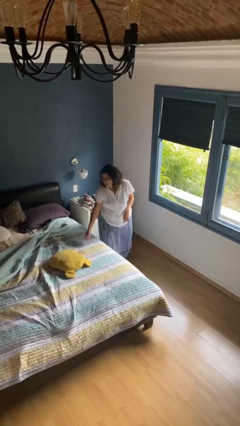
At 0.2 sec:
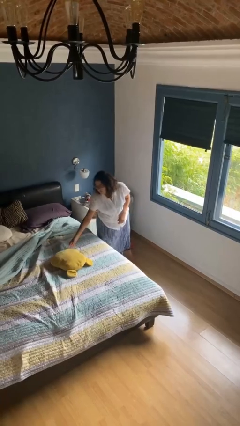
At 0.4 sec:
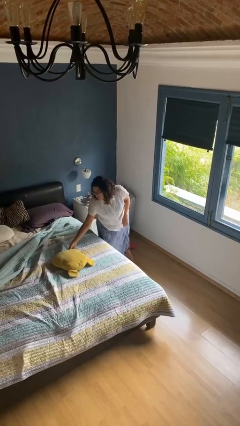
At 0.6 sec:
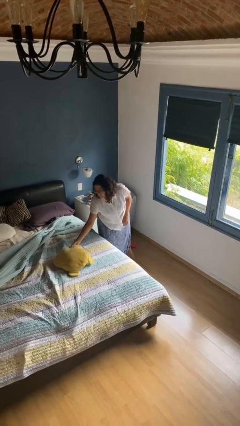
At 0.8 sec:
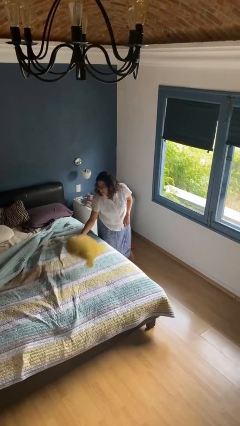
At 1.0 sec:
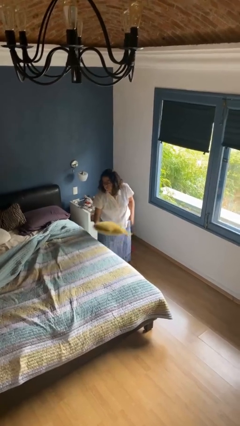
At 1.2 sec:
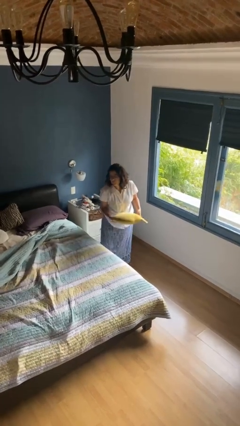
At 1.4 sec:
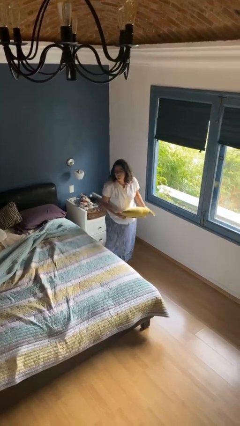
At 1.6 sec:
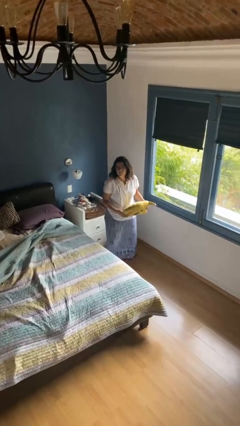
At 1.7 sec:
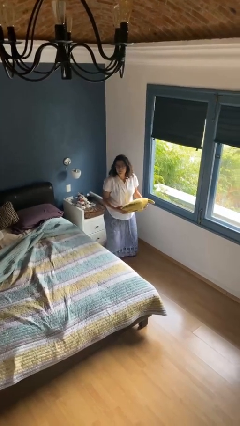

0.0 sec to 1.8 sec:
person picks up object from bed

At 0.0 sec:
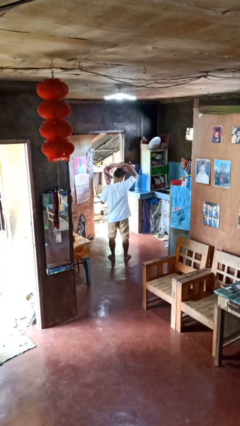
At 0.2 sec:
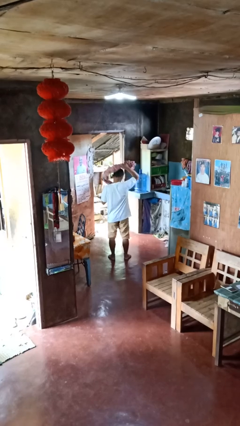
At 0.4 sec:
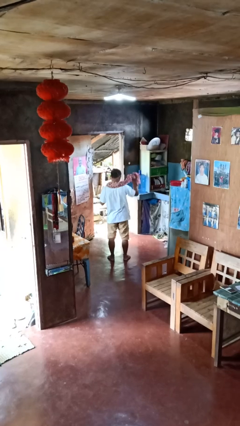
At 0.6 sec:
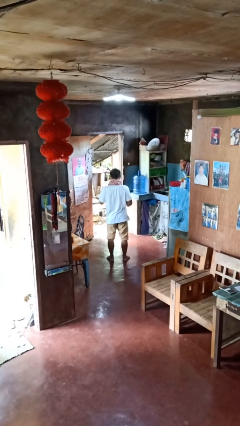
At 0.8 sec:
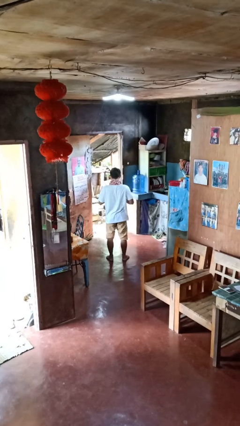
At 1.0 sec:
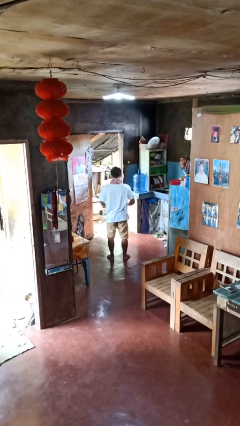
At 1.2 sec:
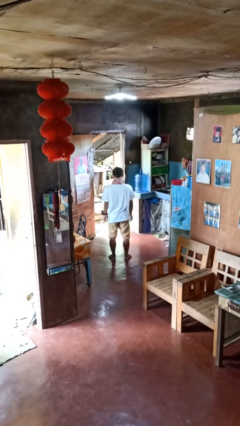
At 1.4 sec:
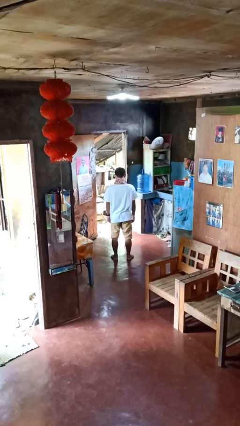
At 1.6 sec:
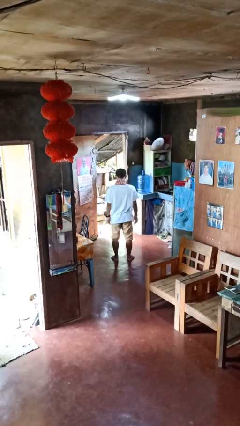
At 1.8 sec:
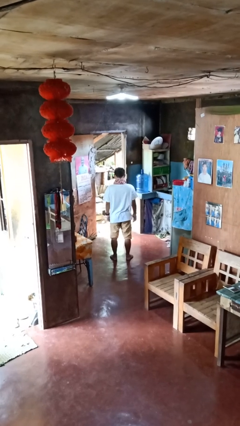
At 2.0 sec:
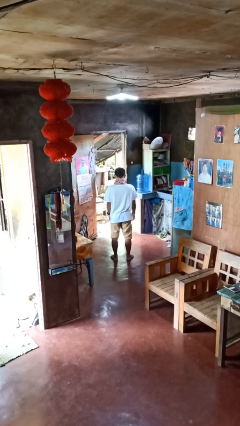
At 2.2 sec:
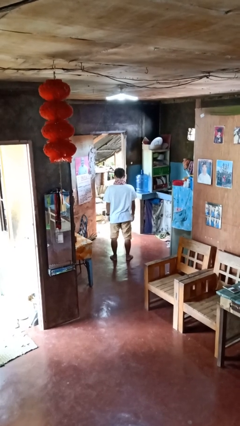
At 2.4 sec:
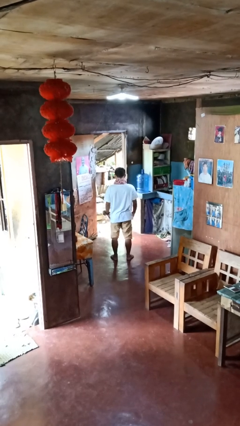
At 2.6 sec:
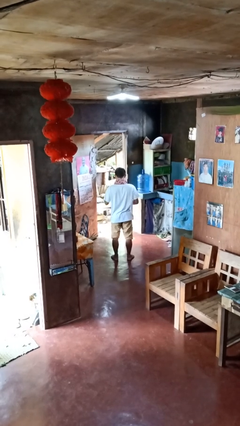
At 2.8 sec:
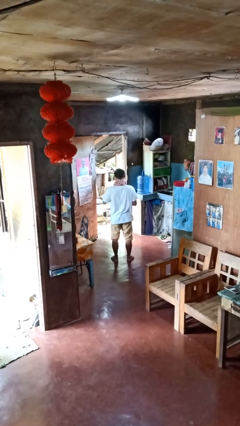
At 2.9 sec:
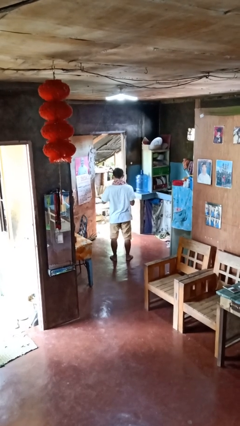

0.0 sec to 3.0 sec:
person puts on scarf

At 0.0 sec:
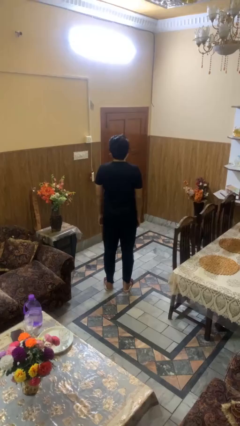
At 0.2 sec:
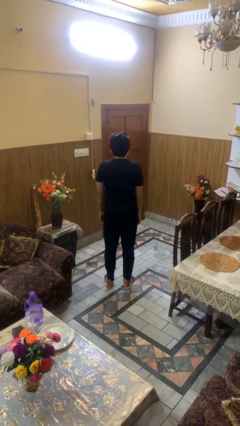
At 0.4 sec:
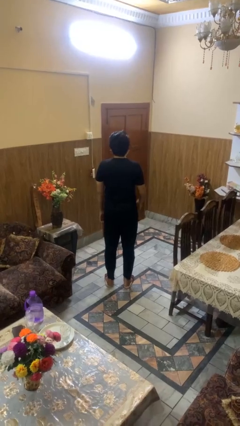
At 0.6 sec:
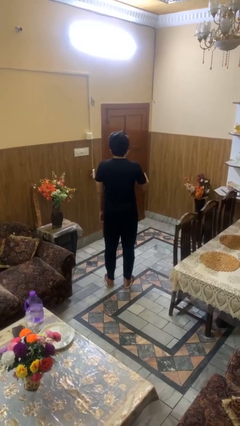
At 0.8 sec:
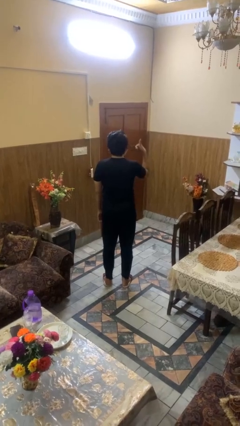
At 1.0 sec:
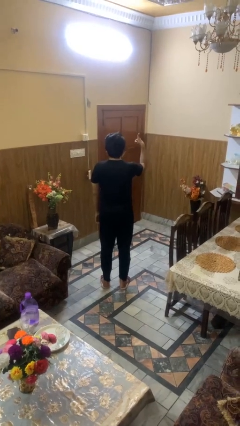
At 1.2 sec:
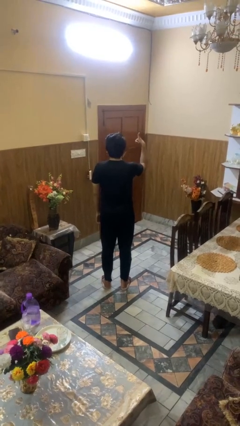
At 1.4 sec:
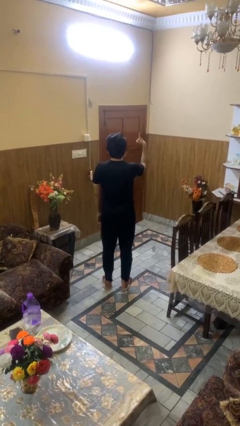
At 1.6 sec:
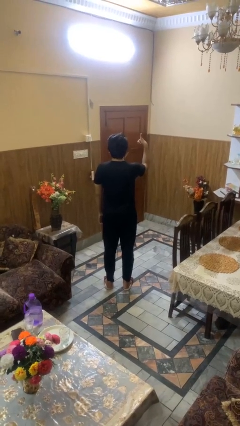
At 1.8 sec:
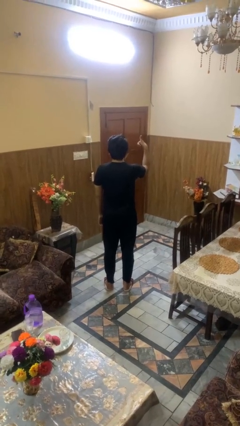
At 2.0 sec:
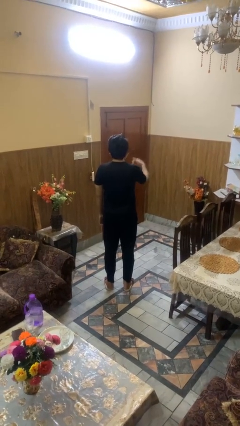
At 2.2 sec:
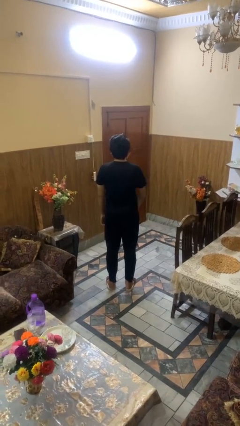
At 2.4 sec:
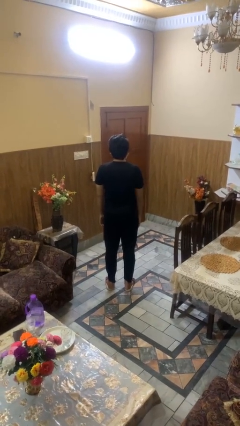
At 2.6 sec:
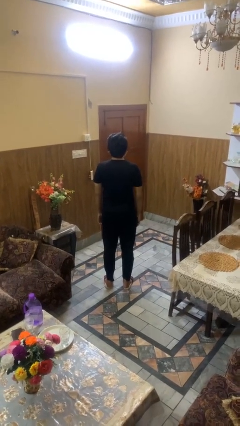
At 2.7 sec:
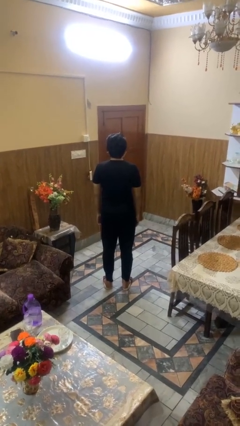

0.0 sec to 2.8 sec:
person gestures thumbs up

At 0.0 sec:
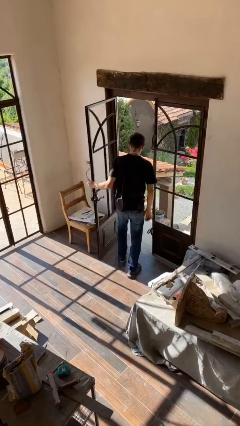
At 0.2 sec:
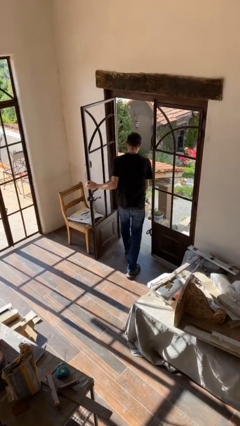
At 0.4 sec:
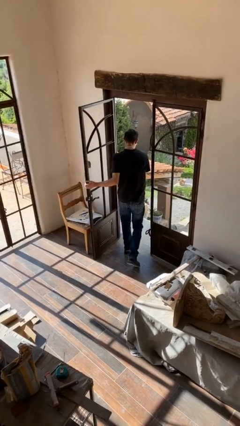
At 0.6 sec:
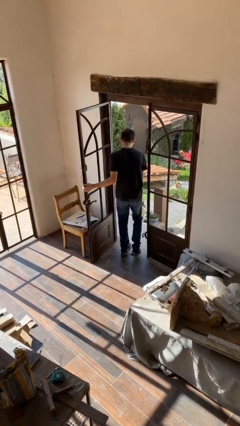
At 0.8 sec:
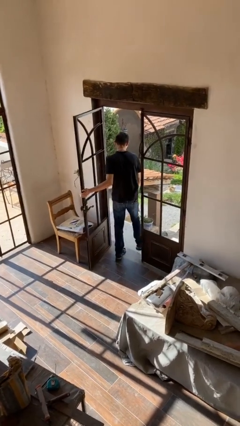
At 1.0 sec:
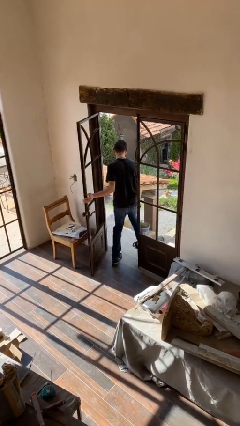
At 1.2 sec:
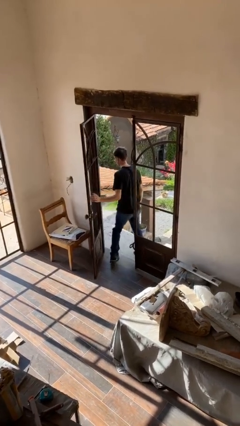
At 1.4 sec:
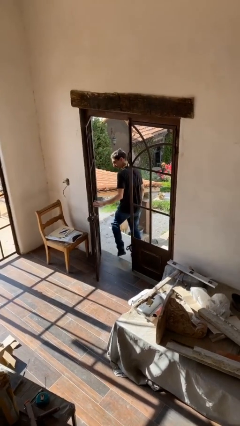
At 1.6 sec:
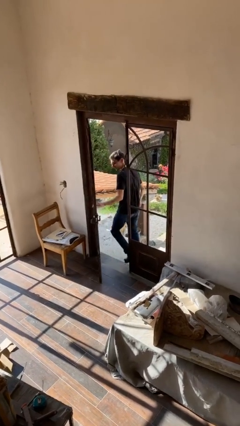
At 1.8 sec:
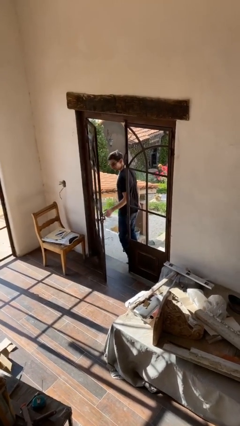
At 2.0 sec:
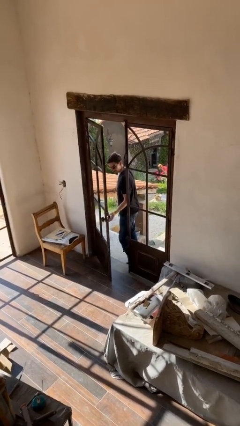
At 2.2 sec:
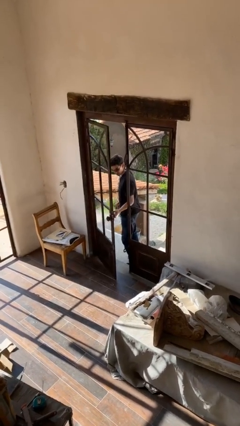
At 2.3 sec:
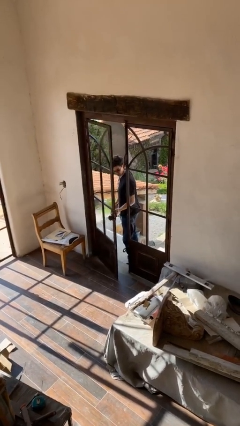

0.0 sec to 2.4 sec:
person exits scene through structure

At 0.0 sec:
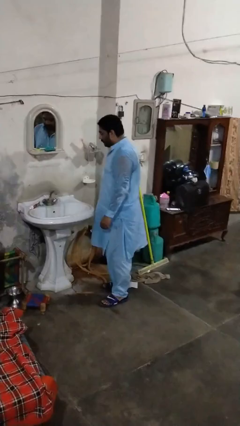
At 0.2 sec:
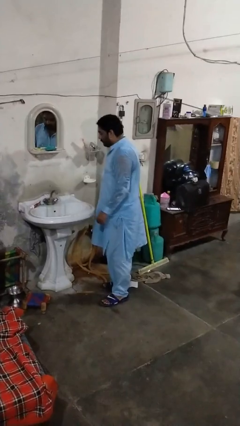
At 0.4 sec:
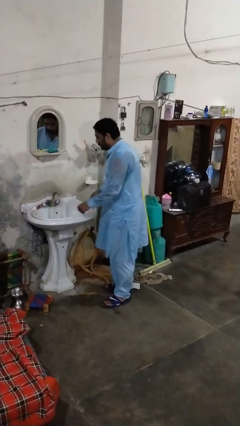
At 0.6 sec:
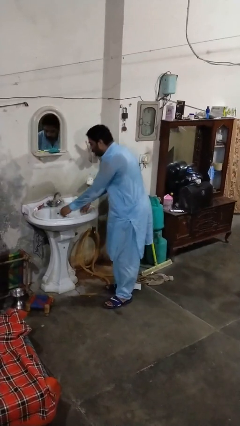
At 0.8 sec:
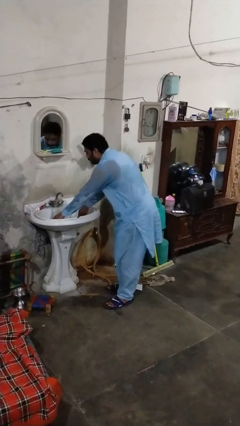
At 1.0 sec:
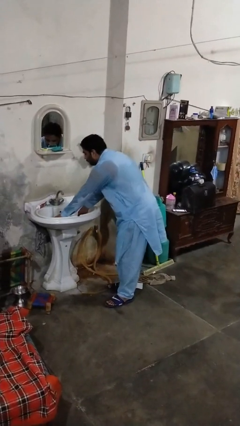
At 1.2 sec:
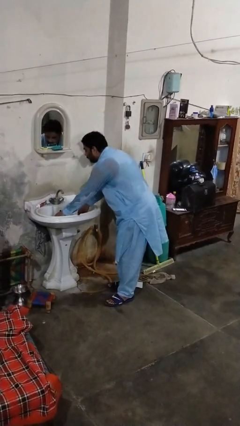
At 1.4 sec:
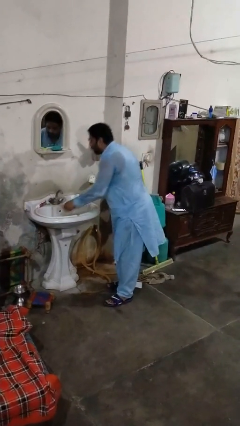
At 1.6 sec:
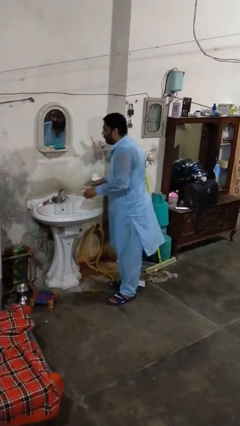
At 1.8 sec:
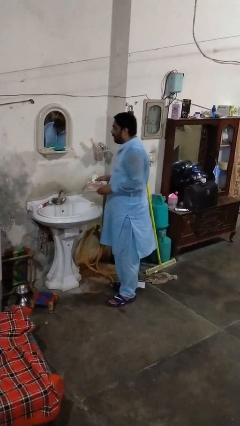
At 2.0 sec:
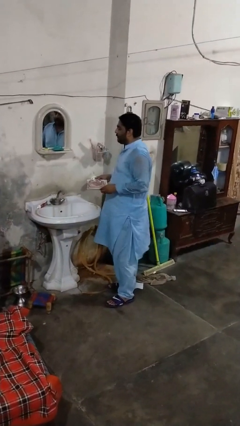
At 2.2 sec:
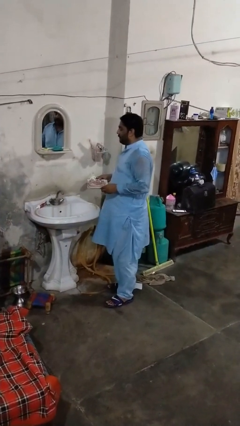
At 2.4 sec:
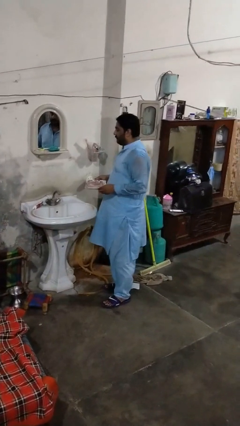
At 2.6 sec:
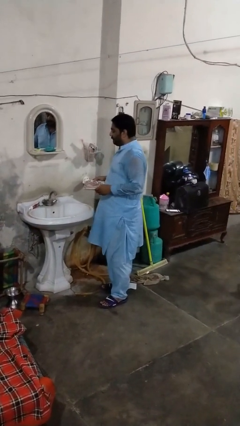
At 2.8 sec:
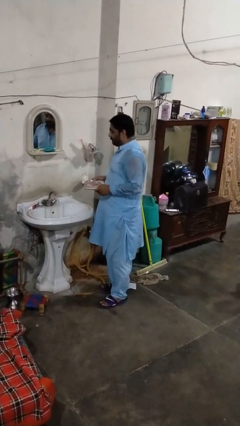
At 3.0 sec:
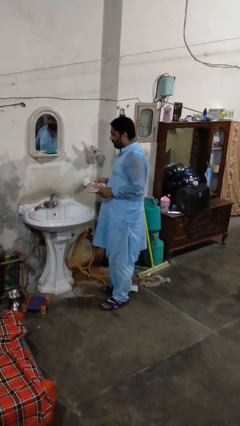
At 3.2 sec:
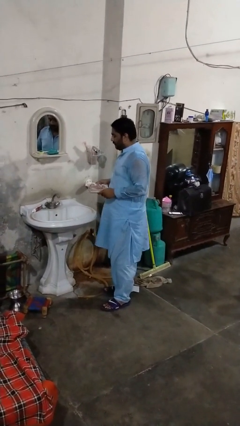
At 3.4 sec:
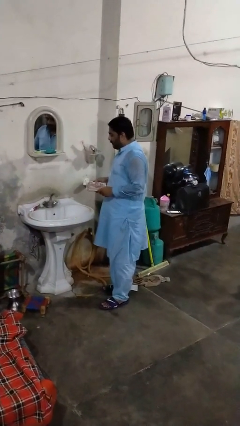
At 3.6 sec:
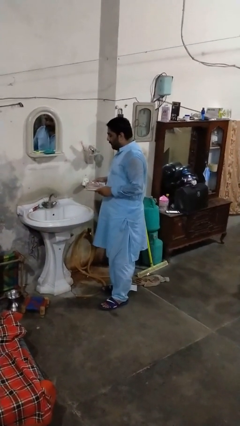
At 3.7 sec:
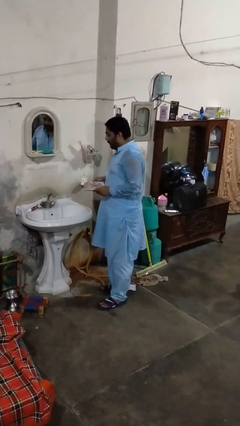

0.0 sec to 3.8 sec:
person unloads dishwasher

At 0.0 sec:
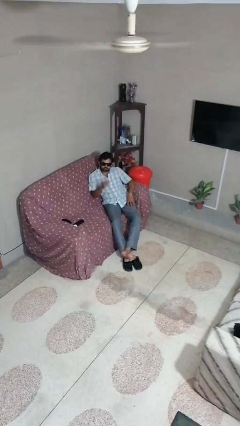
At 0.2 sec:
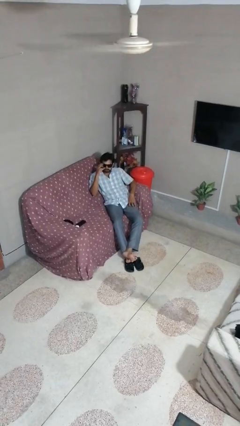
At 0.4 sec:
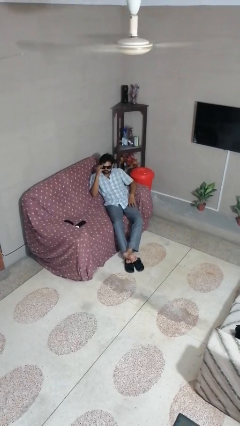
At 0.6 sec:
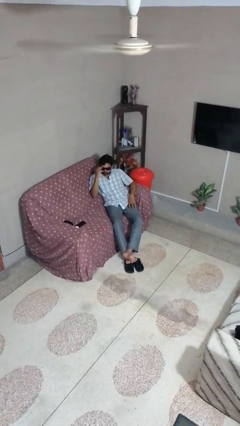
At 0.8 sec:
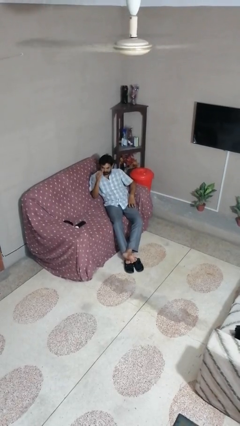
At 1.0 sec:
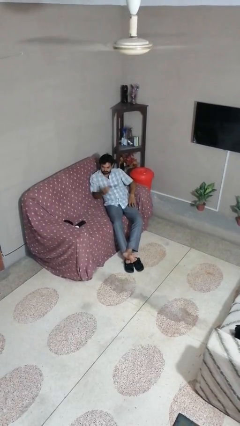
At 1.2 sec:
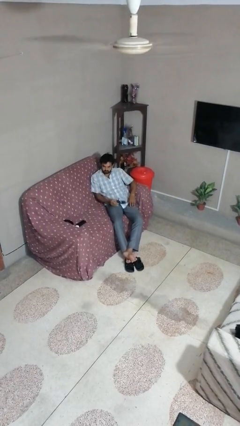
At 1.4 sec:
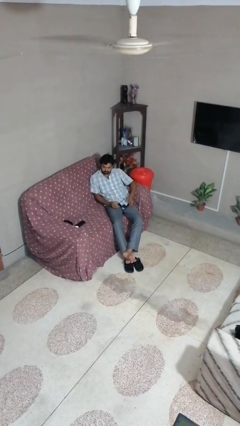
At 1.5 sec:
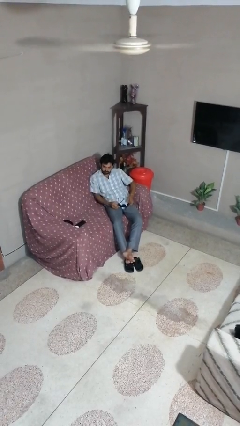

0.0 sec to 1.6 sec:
person takes off sunglasses

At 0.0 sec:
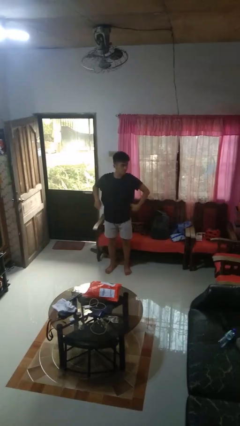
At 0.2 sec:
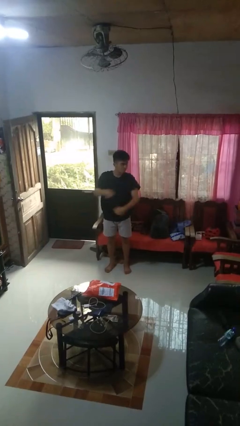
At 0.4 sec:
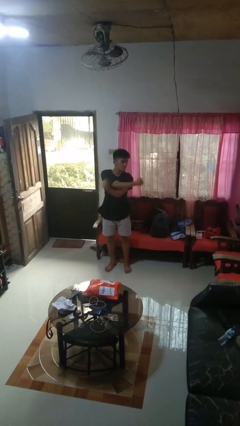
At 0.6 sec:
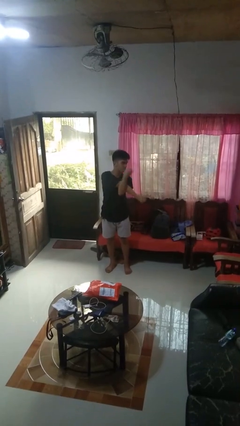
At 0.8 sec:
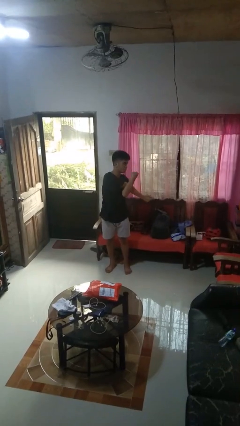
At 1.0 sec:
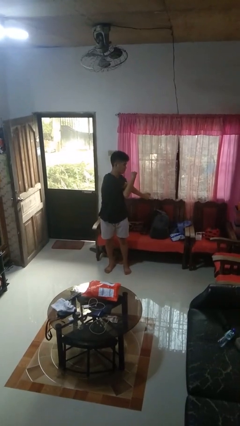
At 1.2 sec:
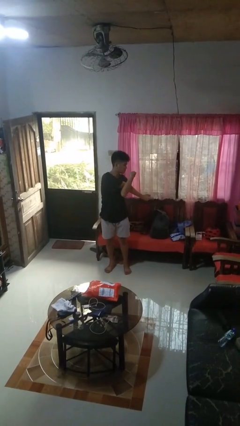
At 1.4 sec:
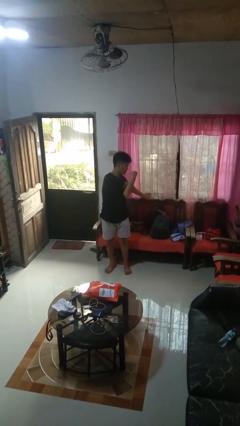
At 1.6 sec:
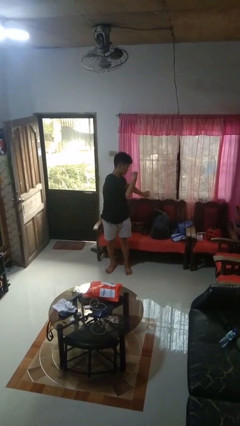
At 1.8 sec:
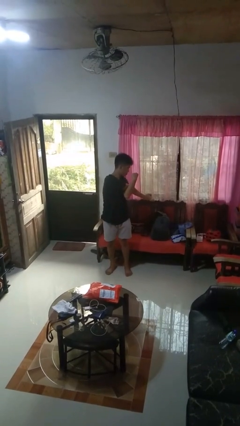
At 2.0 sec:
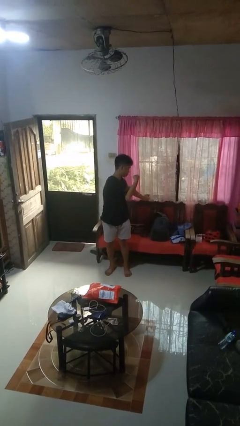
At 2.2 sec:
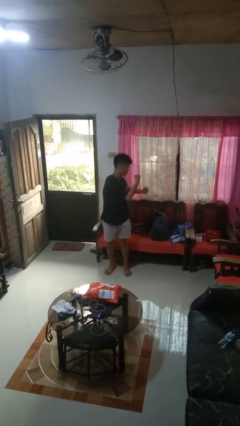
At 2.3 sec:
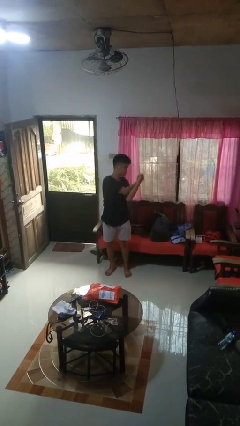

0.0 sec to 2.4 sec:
person stretches arms to side
